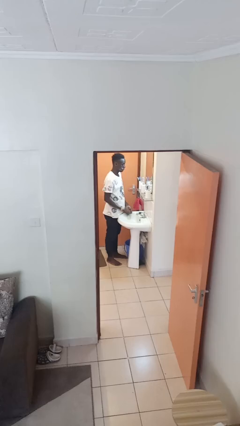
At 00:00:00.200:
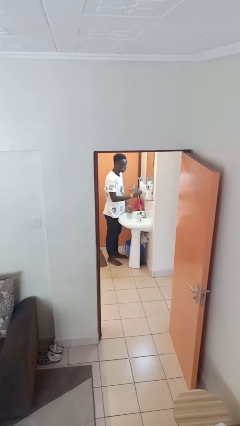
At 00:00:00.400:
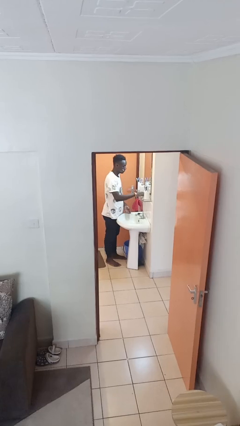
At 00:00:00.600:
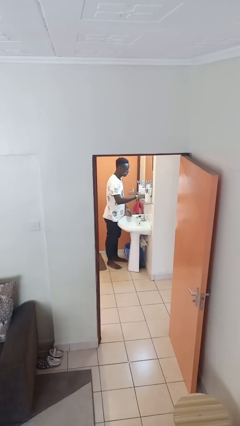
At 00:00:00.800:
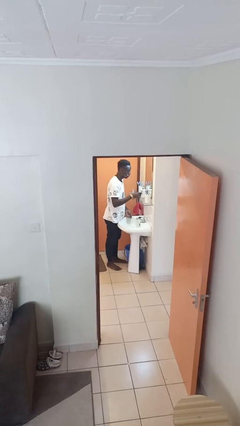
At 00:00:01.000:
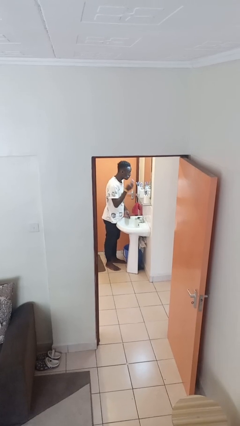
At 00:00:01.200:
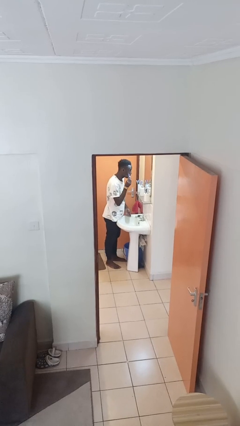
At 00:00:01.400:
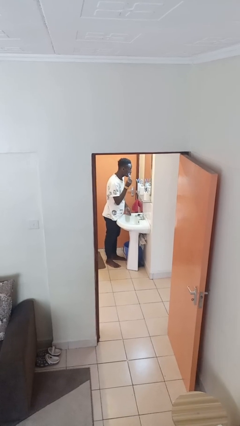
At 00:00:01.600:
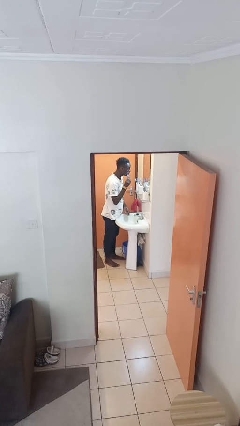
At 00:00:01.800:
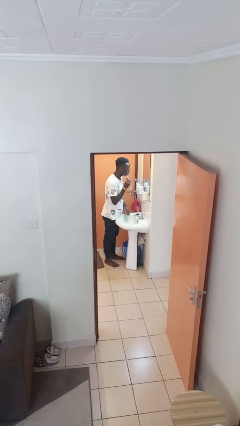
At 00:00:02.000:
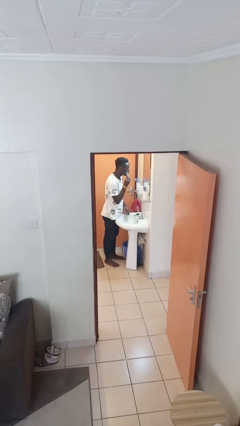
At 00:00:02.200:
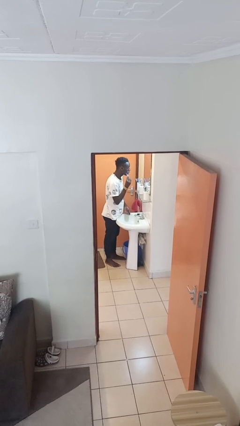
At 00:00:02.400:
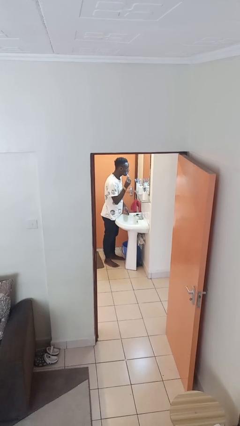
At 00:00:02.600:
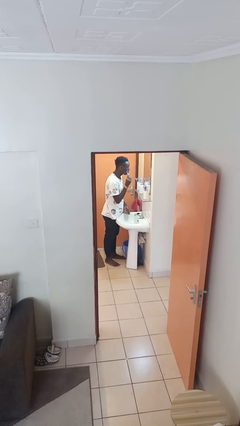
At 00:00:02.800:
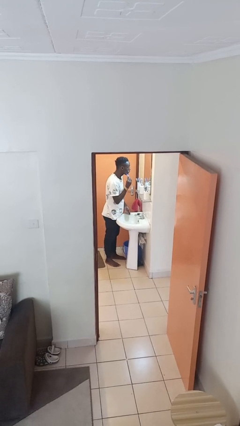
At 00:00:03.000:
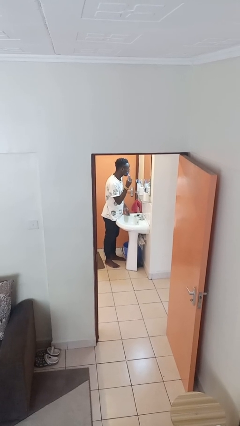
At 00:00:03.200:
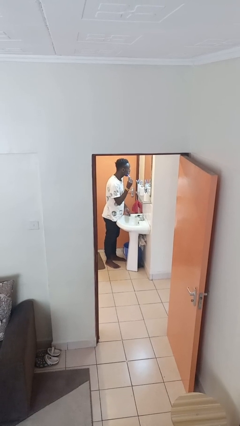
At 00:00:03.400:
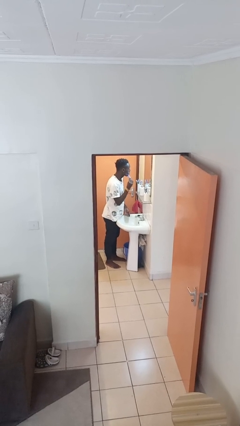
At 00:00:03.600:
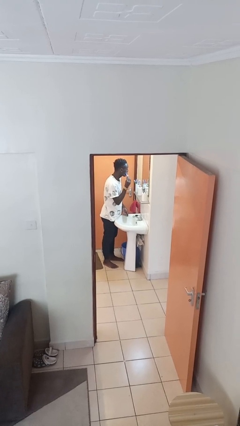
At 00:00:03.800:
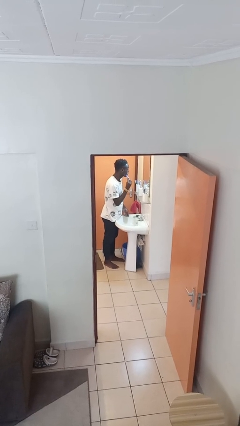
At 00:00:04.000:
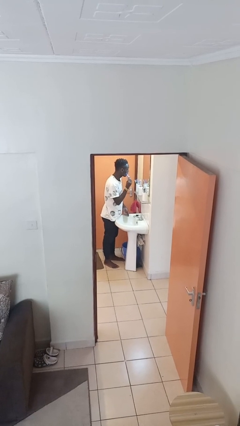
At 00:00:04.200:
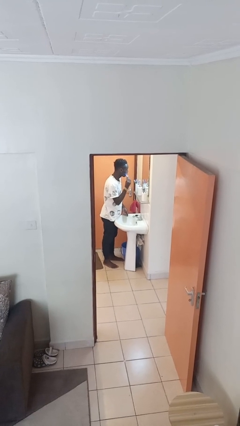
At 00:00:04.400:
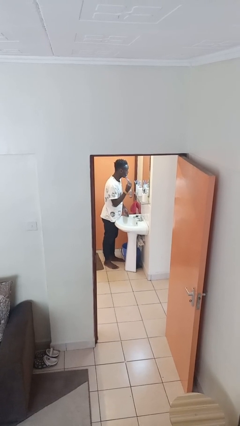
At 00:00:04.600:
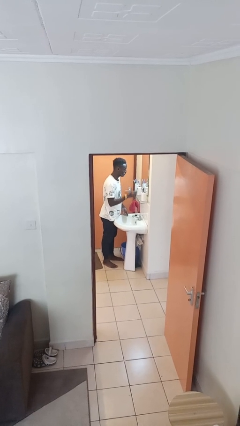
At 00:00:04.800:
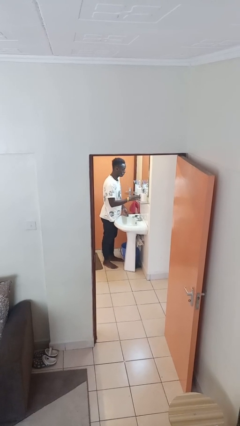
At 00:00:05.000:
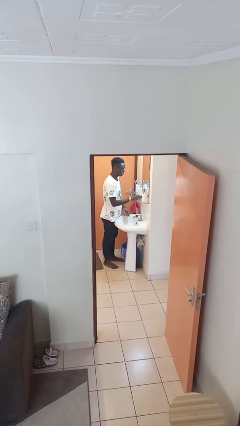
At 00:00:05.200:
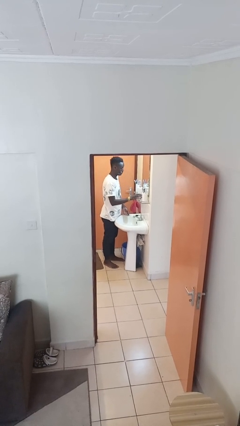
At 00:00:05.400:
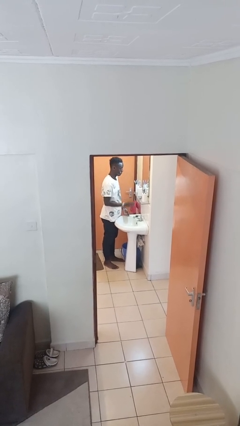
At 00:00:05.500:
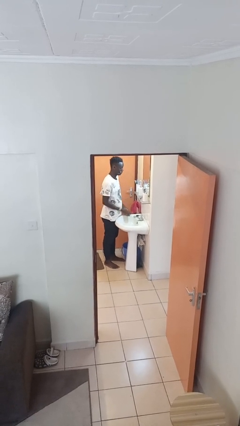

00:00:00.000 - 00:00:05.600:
person shaves face

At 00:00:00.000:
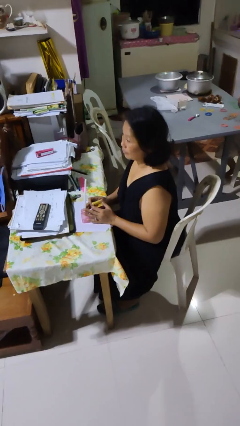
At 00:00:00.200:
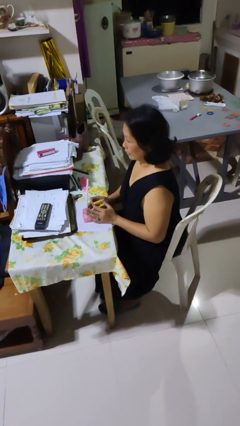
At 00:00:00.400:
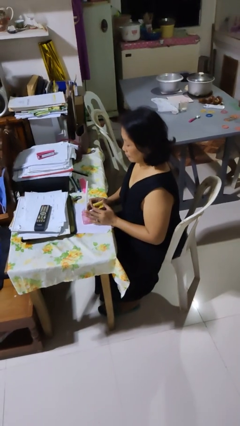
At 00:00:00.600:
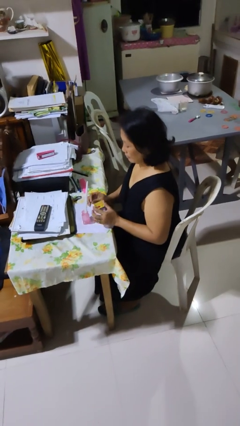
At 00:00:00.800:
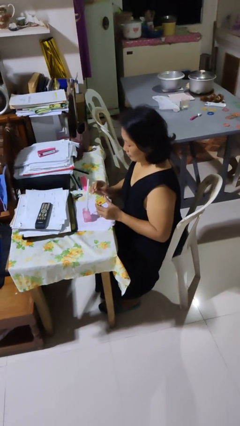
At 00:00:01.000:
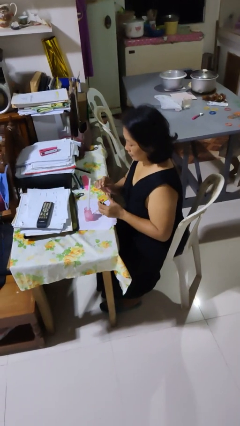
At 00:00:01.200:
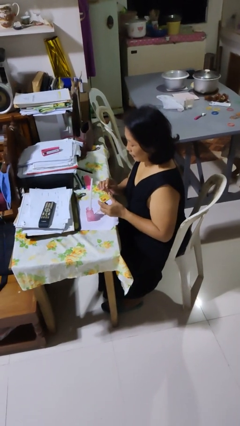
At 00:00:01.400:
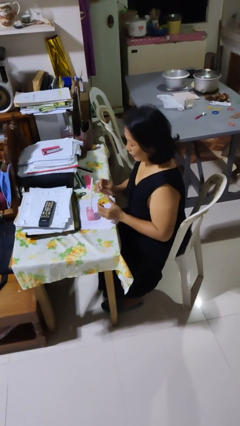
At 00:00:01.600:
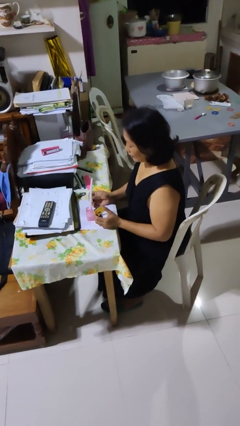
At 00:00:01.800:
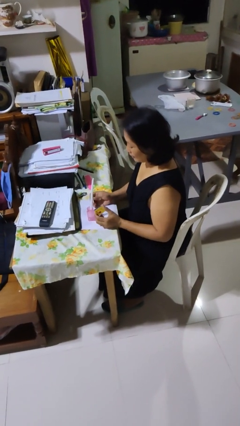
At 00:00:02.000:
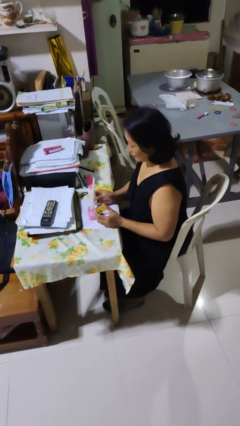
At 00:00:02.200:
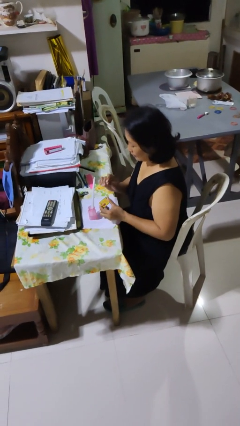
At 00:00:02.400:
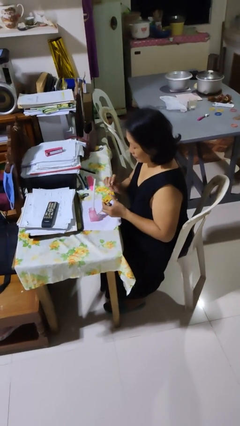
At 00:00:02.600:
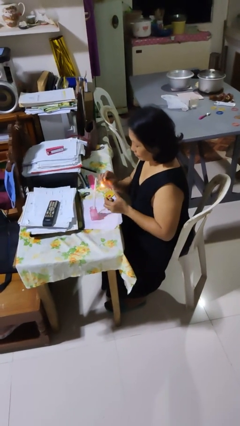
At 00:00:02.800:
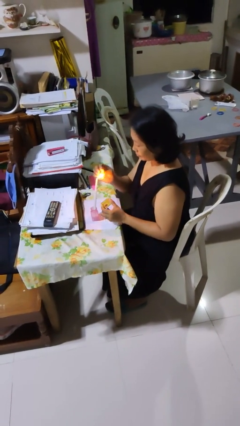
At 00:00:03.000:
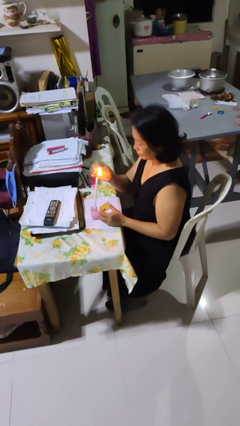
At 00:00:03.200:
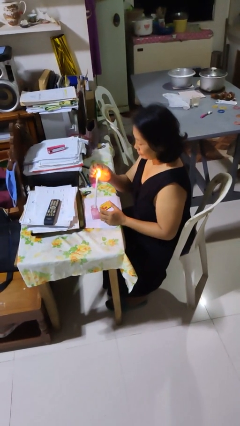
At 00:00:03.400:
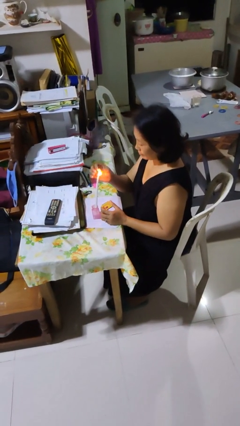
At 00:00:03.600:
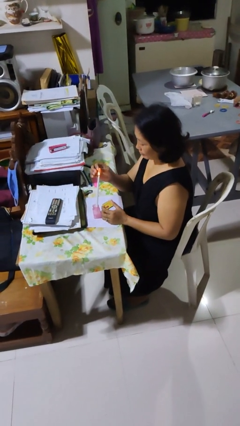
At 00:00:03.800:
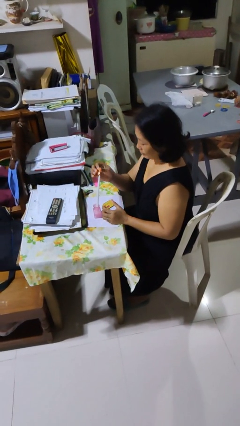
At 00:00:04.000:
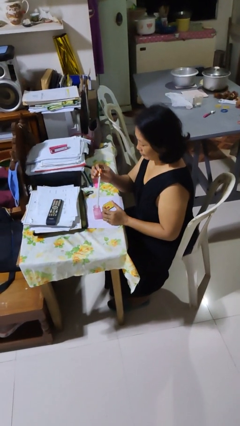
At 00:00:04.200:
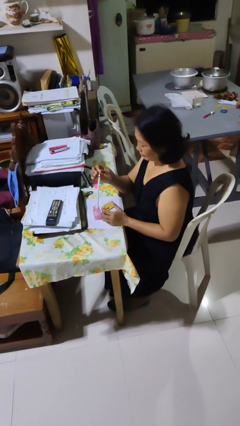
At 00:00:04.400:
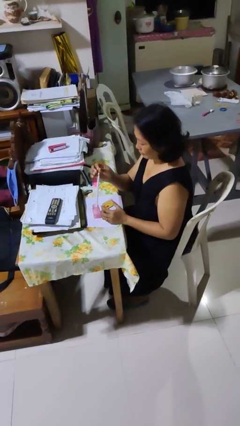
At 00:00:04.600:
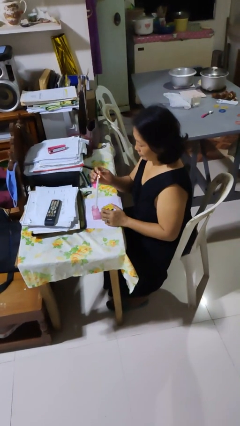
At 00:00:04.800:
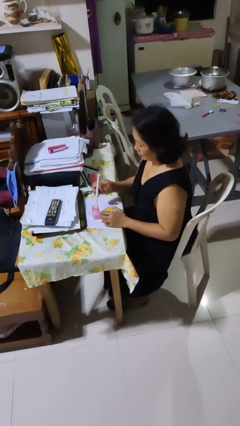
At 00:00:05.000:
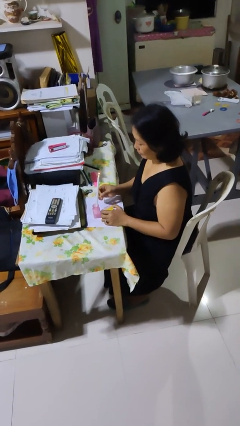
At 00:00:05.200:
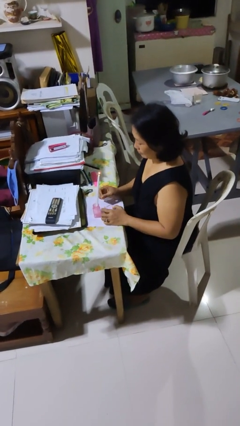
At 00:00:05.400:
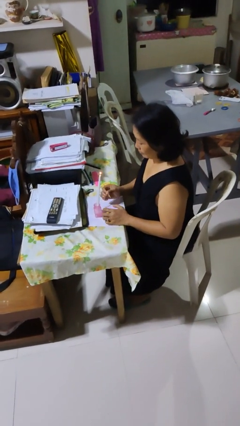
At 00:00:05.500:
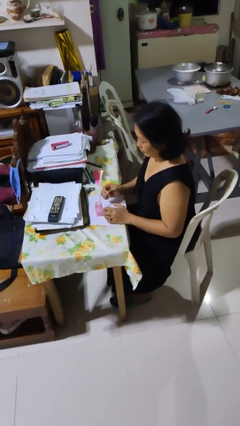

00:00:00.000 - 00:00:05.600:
person lights candle

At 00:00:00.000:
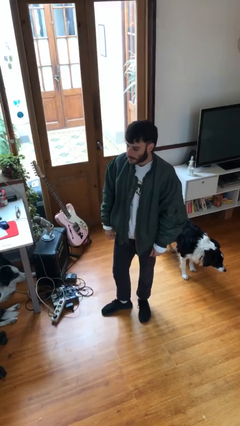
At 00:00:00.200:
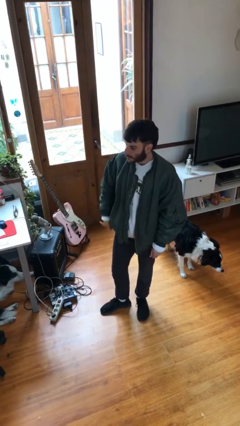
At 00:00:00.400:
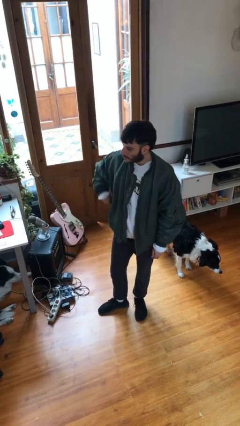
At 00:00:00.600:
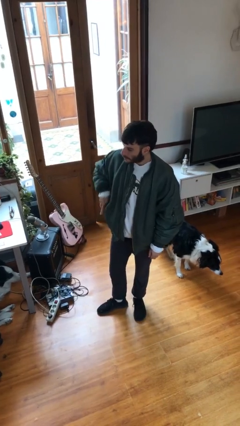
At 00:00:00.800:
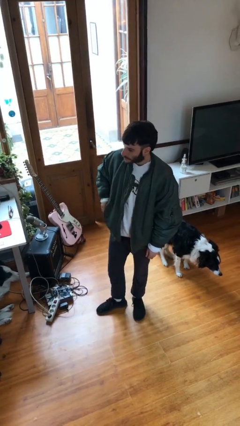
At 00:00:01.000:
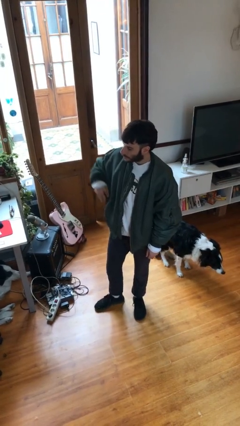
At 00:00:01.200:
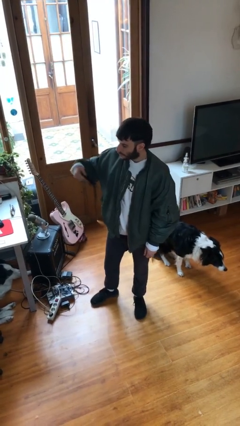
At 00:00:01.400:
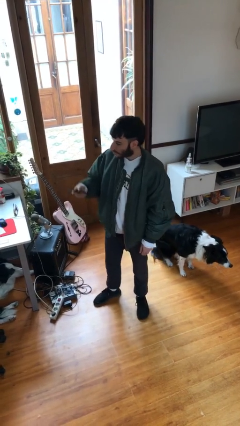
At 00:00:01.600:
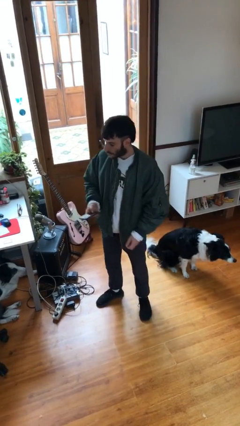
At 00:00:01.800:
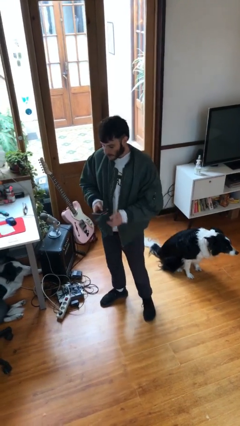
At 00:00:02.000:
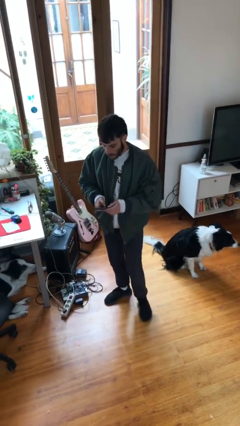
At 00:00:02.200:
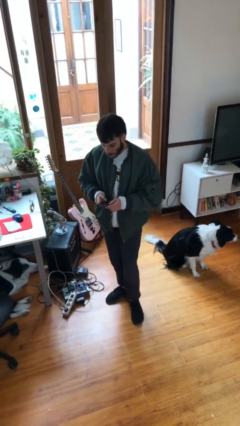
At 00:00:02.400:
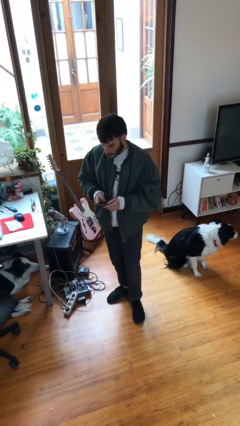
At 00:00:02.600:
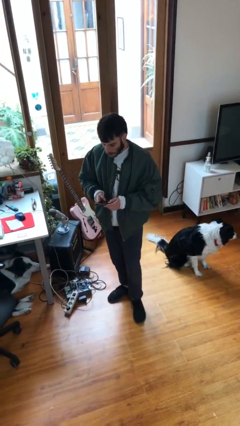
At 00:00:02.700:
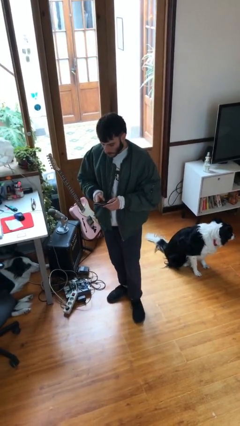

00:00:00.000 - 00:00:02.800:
person takes phone from pocket

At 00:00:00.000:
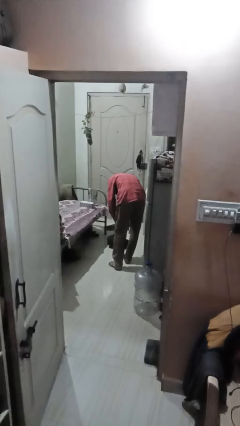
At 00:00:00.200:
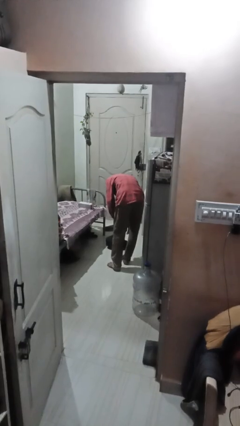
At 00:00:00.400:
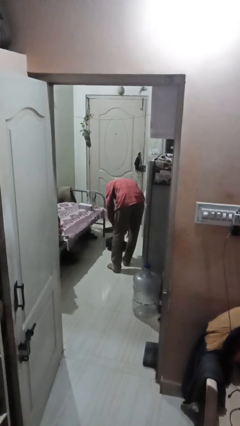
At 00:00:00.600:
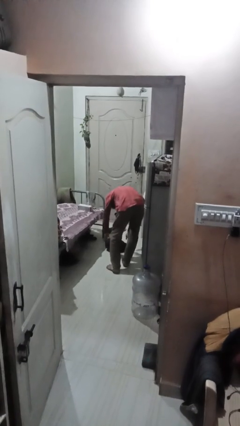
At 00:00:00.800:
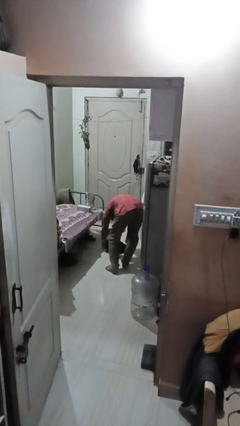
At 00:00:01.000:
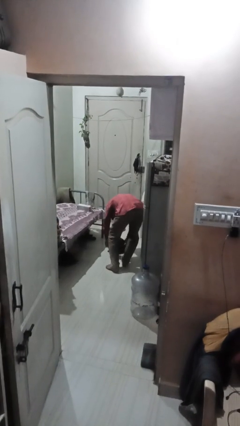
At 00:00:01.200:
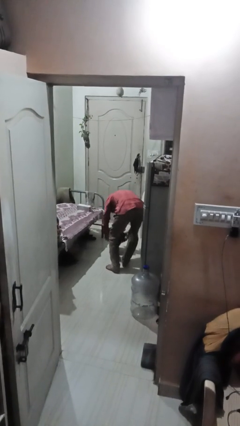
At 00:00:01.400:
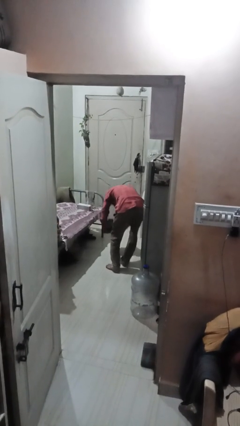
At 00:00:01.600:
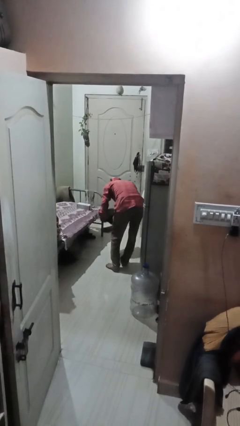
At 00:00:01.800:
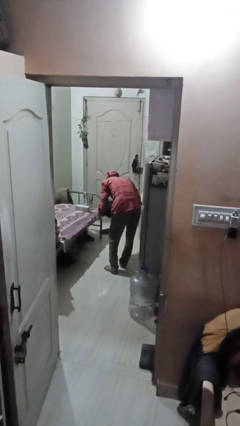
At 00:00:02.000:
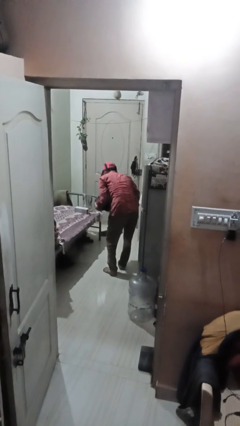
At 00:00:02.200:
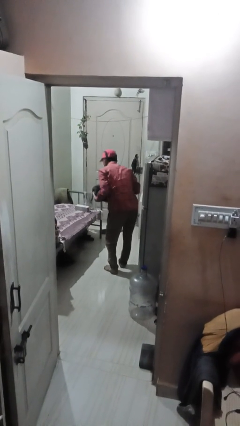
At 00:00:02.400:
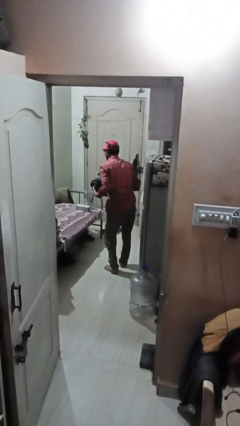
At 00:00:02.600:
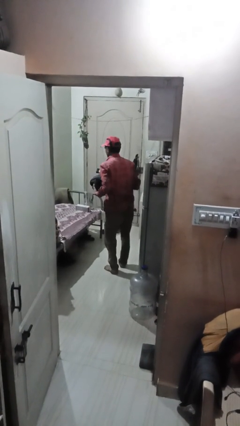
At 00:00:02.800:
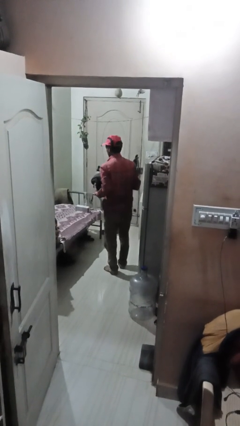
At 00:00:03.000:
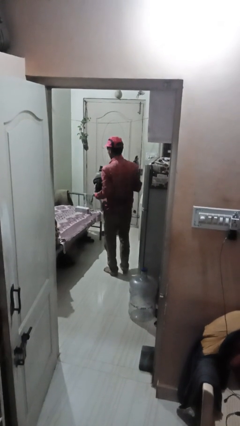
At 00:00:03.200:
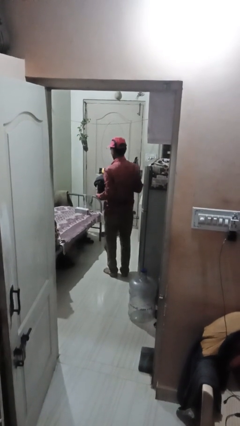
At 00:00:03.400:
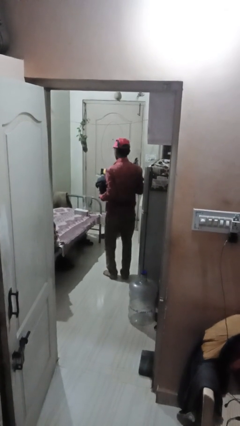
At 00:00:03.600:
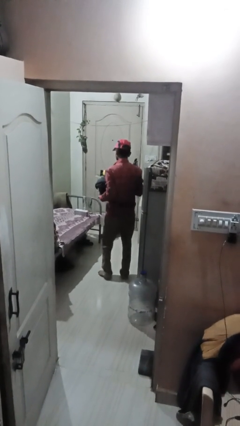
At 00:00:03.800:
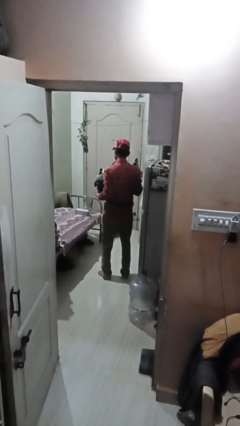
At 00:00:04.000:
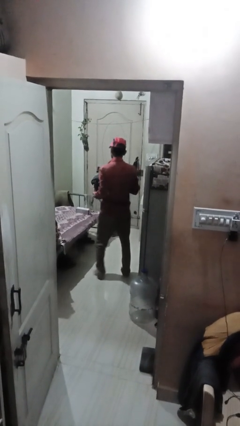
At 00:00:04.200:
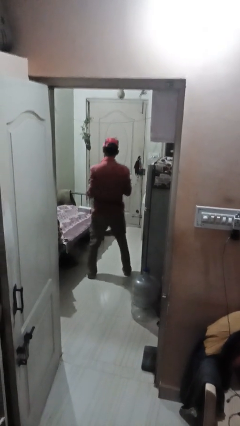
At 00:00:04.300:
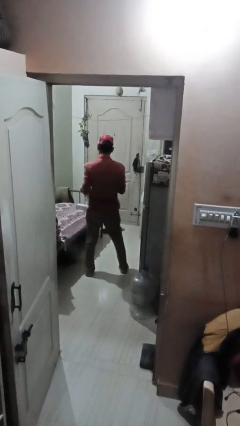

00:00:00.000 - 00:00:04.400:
person picks up object from floor
